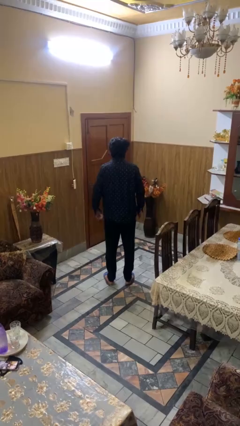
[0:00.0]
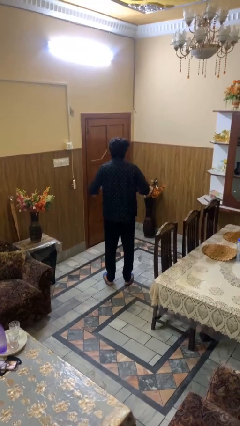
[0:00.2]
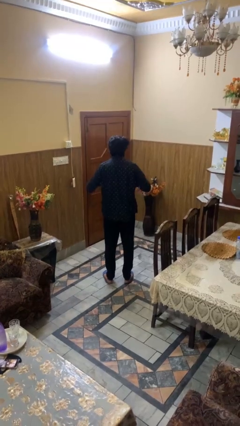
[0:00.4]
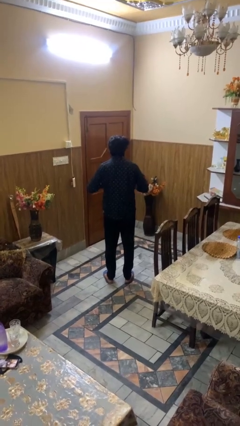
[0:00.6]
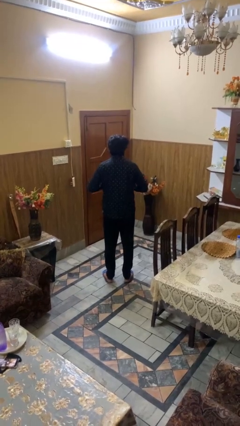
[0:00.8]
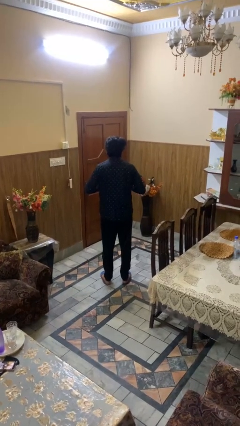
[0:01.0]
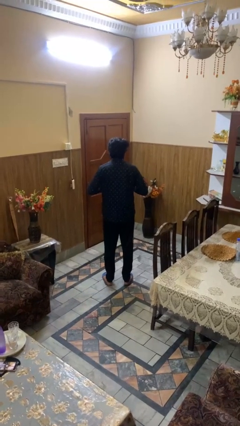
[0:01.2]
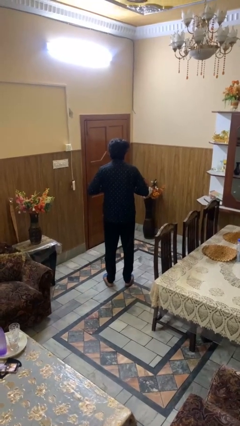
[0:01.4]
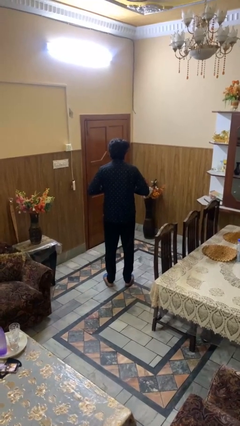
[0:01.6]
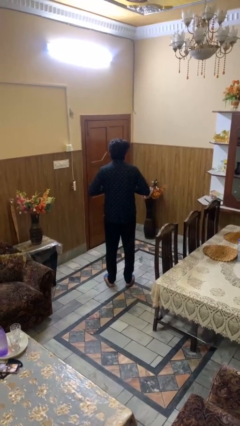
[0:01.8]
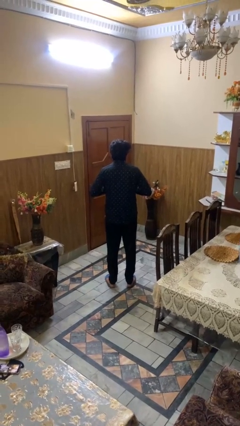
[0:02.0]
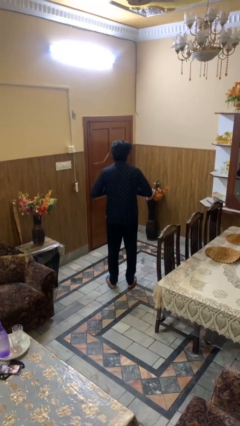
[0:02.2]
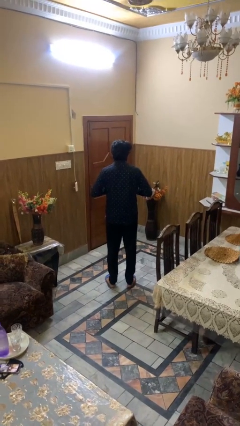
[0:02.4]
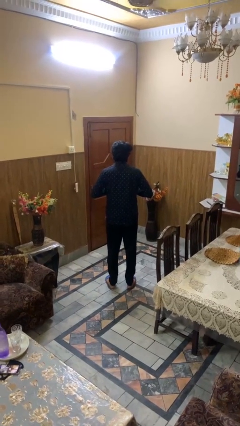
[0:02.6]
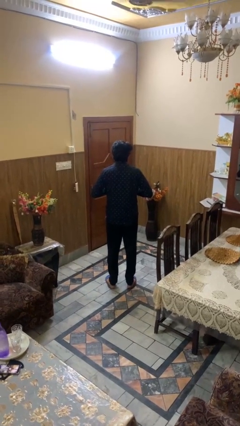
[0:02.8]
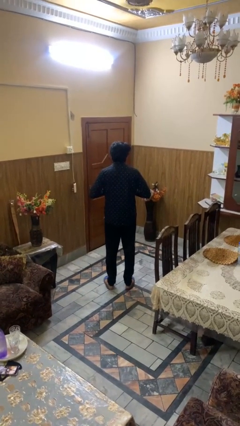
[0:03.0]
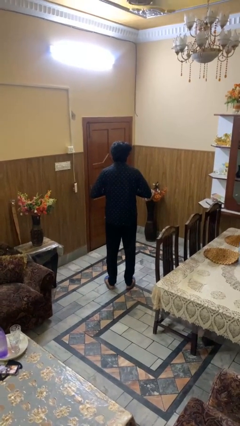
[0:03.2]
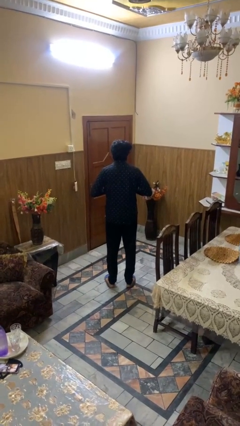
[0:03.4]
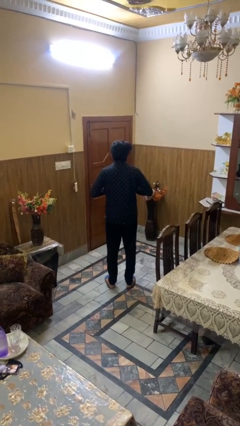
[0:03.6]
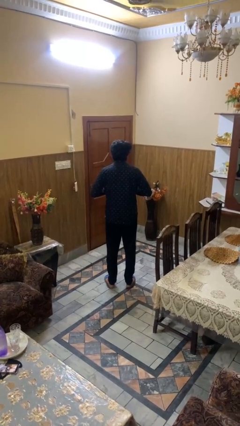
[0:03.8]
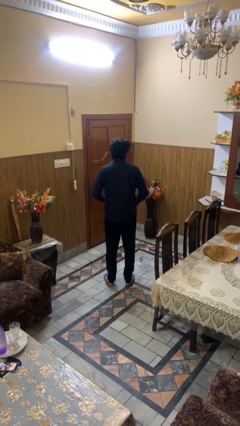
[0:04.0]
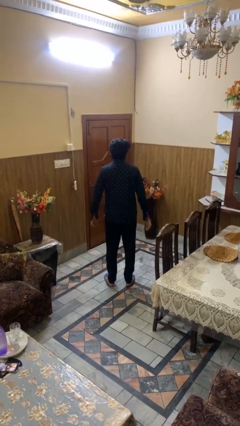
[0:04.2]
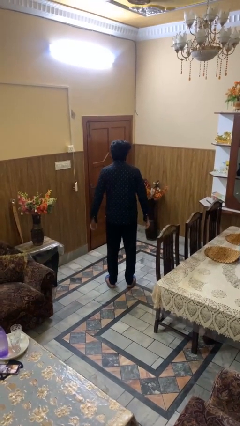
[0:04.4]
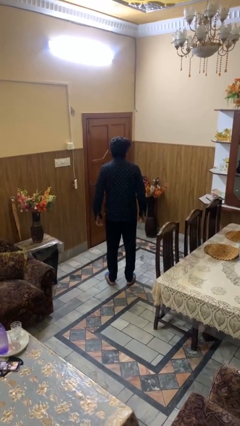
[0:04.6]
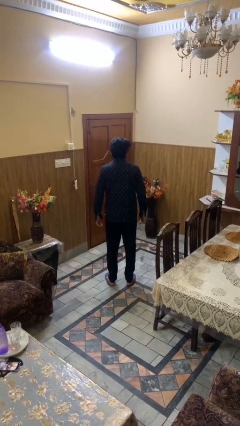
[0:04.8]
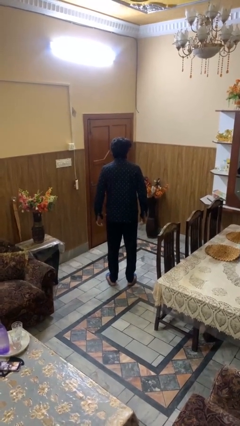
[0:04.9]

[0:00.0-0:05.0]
person buttons shirt

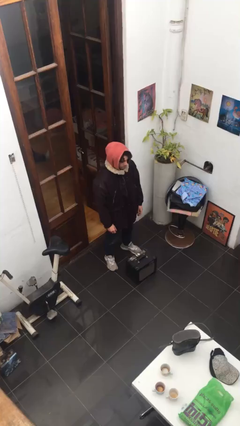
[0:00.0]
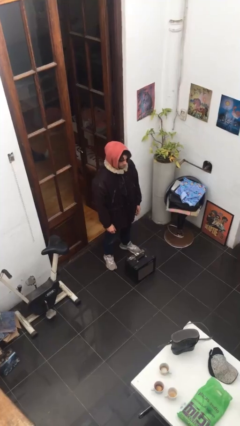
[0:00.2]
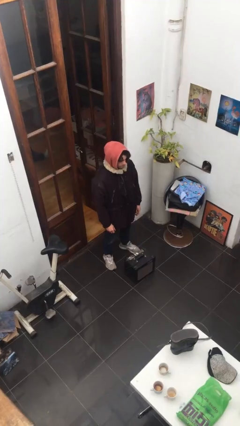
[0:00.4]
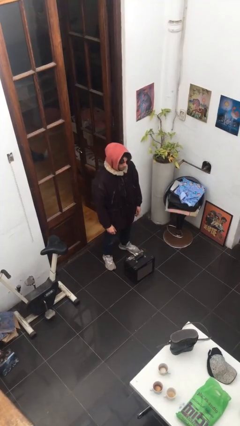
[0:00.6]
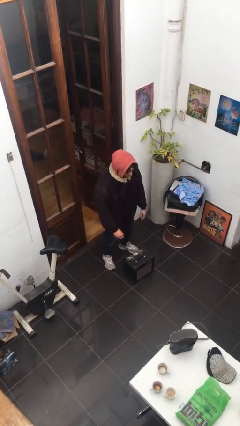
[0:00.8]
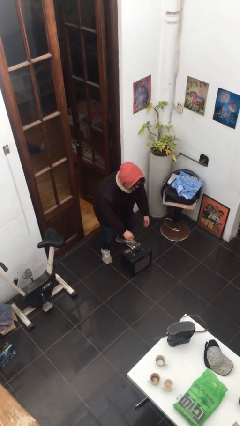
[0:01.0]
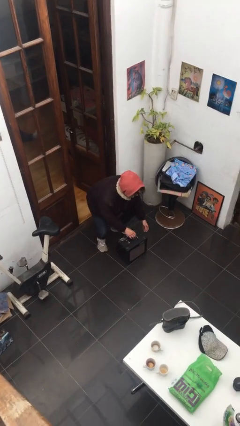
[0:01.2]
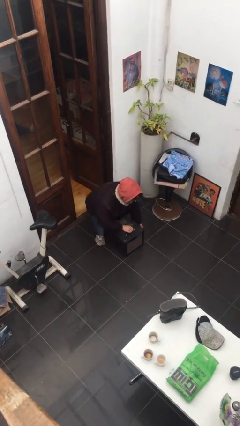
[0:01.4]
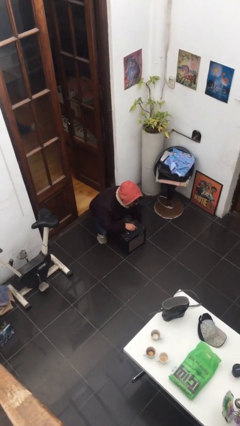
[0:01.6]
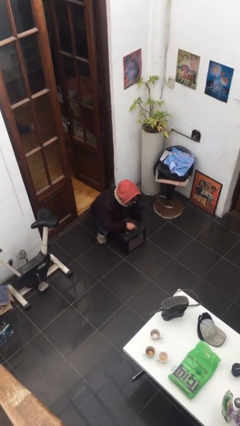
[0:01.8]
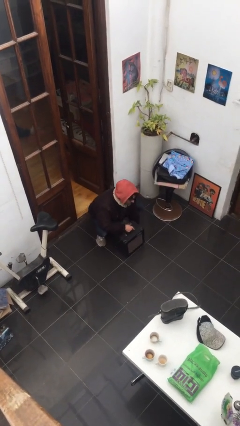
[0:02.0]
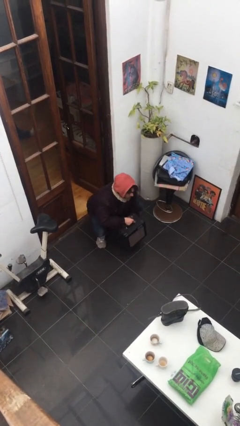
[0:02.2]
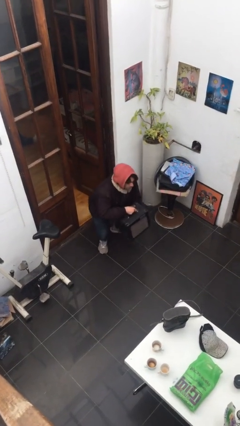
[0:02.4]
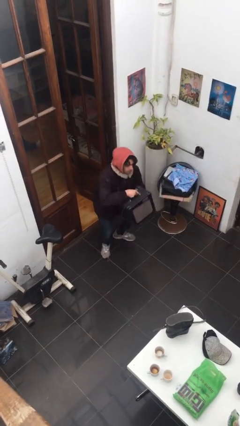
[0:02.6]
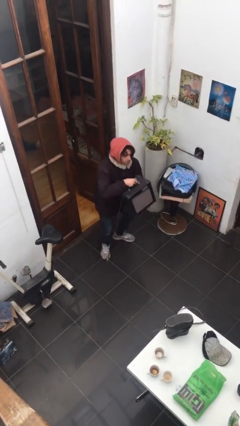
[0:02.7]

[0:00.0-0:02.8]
person picks up object from floor

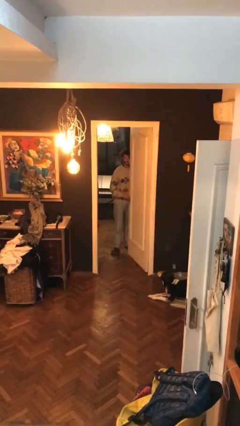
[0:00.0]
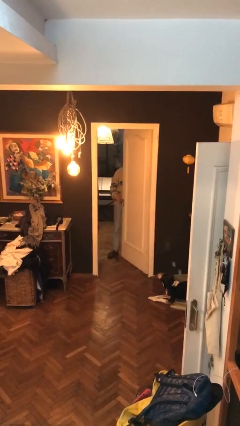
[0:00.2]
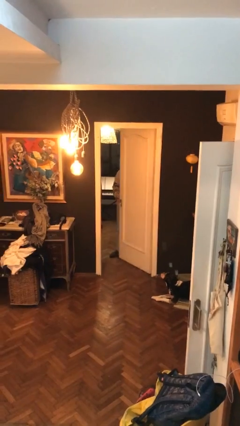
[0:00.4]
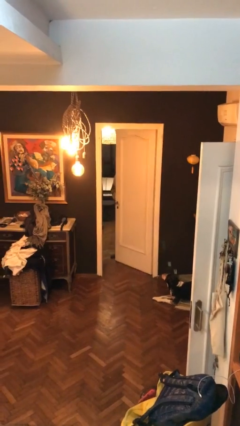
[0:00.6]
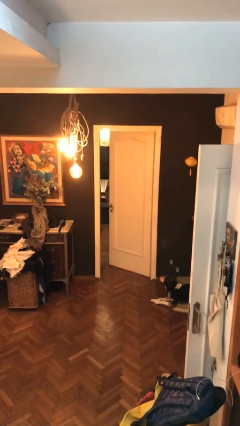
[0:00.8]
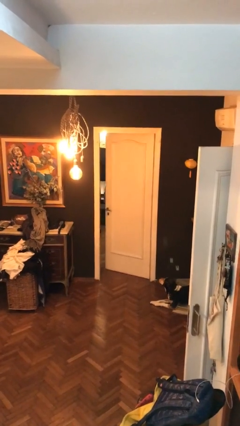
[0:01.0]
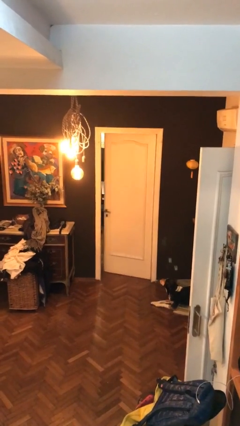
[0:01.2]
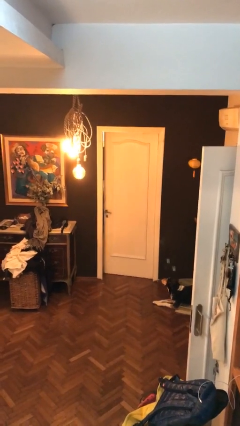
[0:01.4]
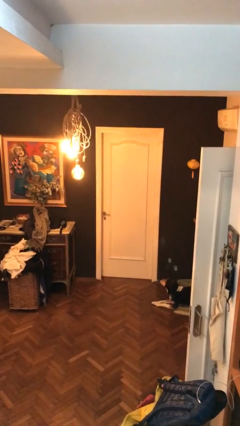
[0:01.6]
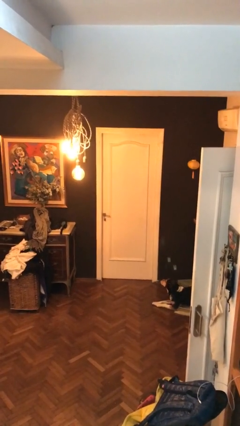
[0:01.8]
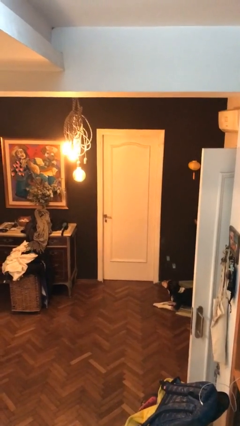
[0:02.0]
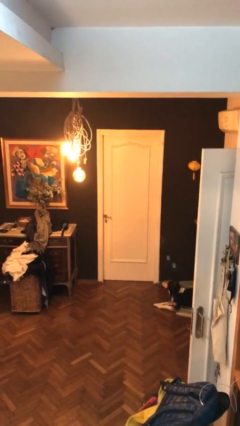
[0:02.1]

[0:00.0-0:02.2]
person closes facility door

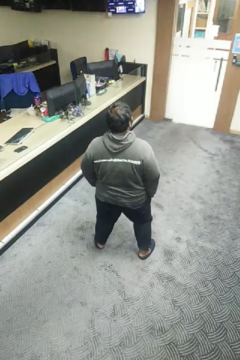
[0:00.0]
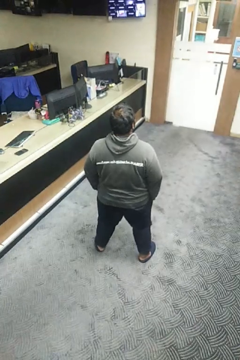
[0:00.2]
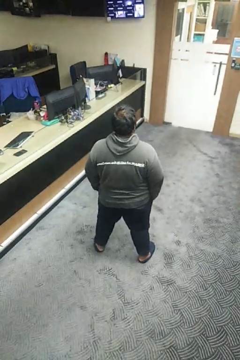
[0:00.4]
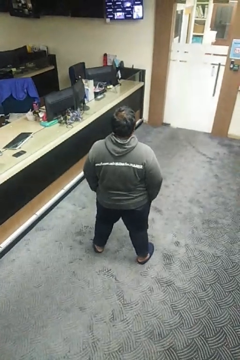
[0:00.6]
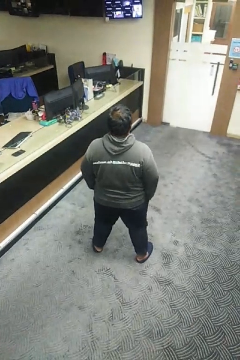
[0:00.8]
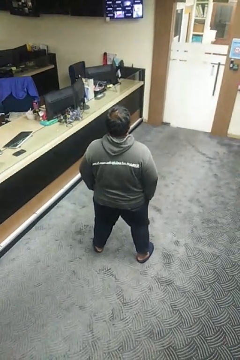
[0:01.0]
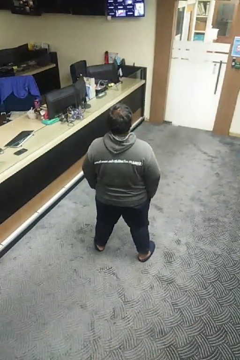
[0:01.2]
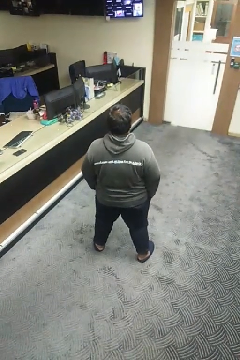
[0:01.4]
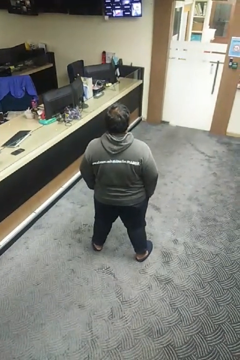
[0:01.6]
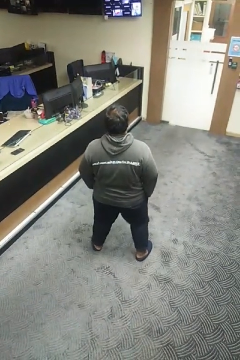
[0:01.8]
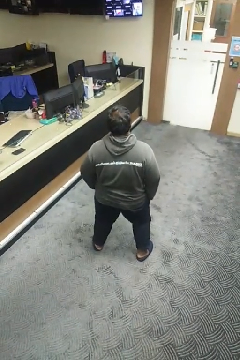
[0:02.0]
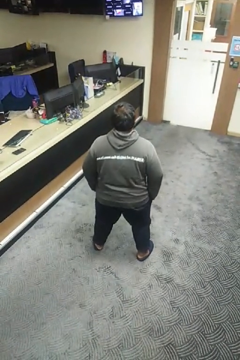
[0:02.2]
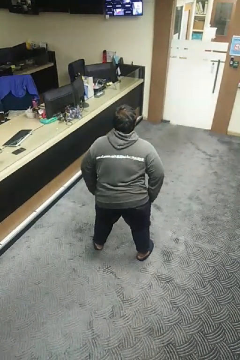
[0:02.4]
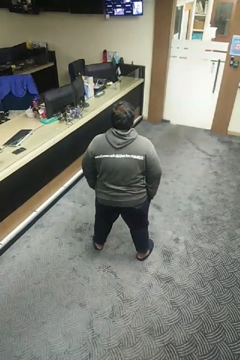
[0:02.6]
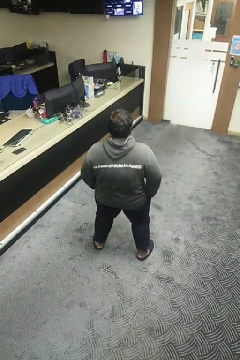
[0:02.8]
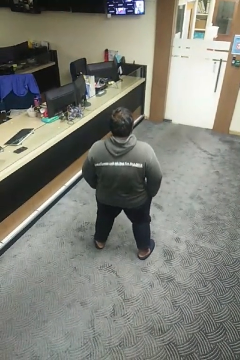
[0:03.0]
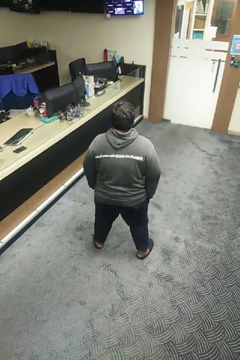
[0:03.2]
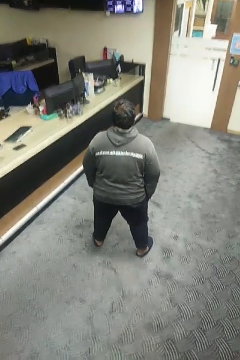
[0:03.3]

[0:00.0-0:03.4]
person wiggles hips

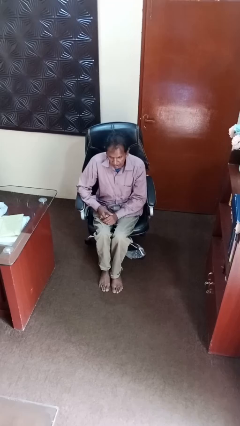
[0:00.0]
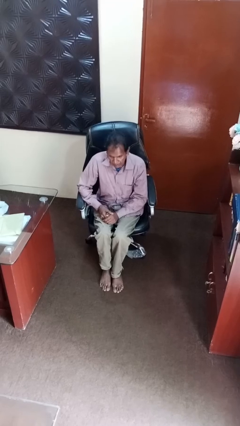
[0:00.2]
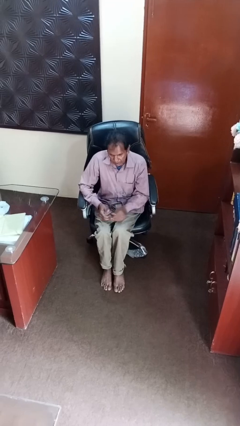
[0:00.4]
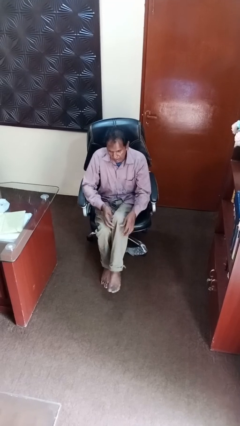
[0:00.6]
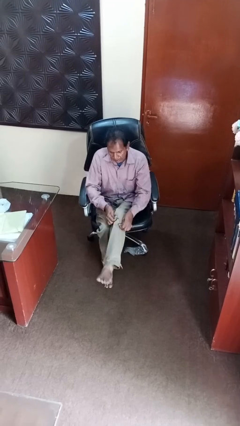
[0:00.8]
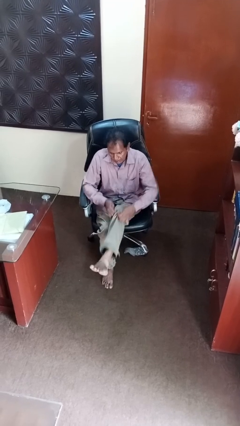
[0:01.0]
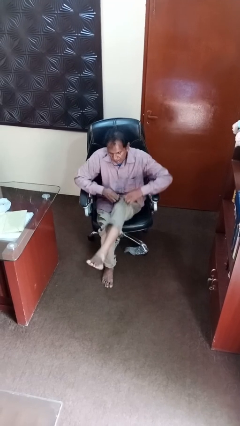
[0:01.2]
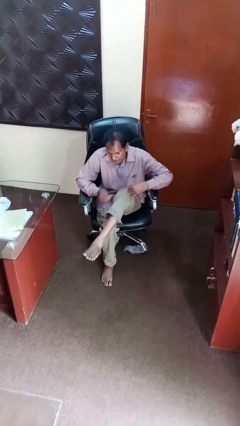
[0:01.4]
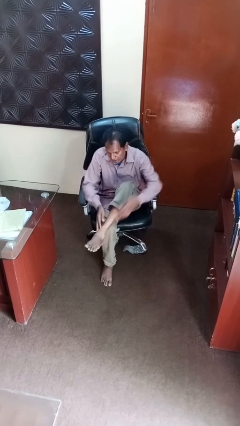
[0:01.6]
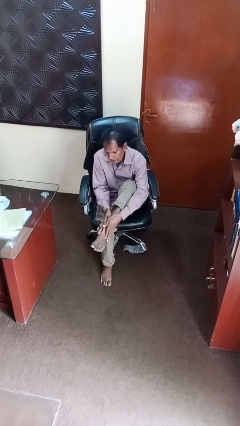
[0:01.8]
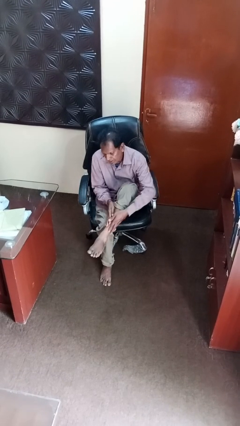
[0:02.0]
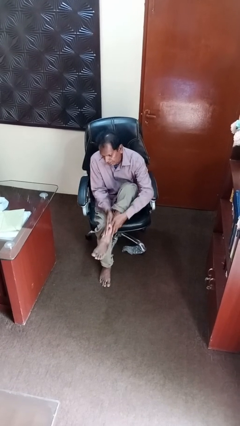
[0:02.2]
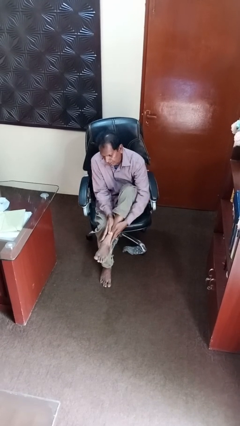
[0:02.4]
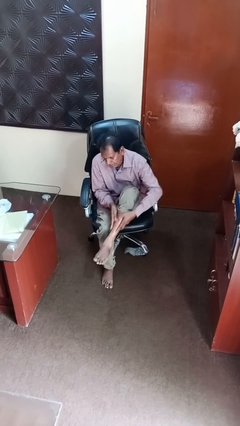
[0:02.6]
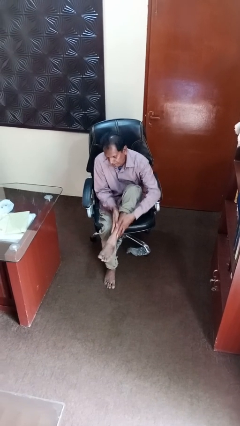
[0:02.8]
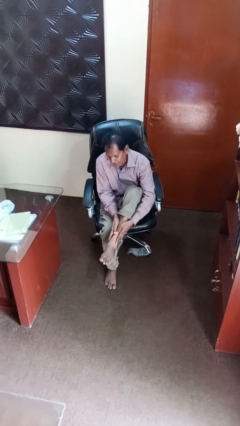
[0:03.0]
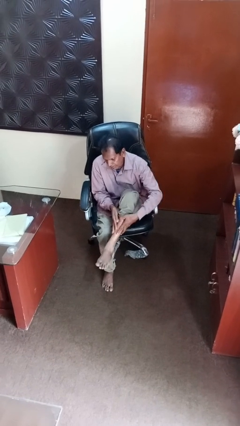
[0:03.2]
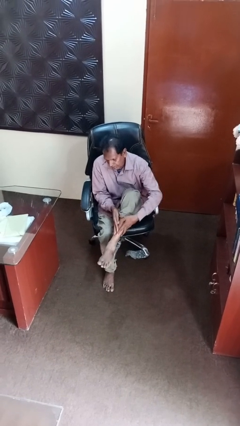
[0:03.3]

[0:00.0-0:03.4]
person rubs foot

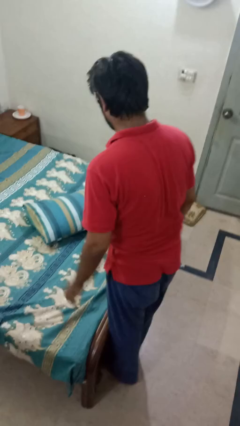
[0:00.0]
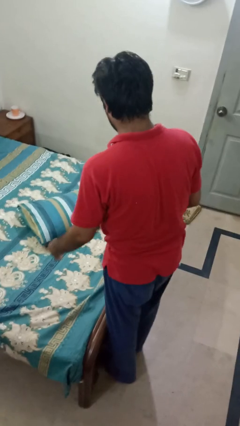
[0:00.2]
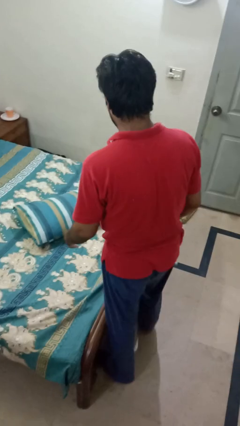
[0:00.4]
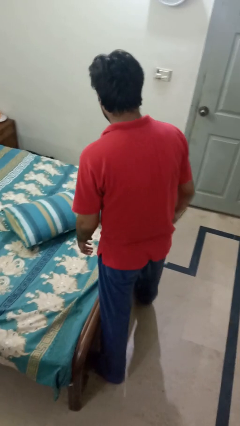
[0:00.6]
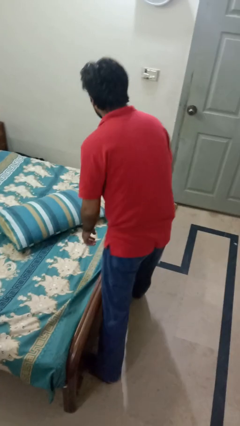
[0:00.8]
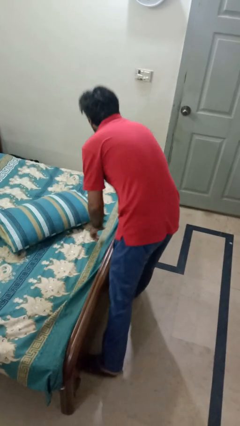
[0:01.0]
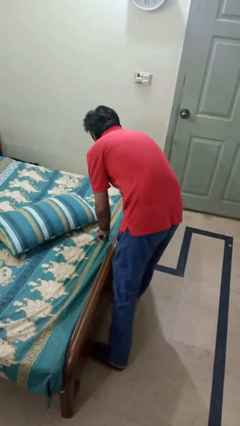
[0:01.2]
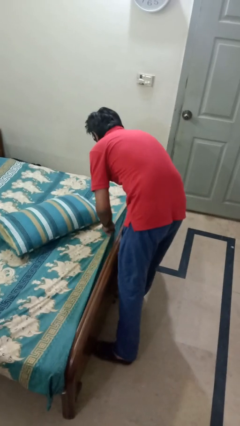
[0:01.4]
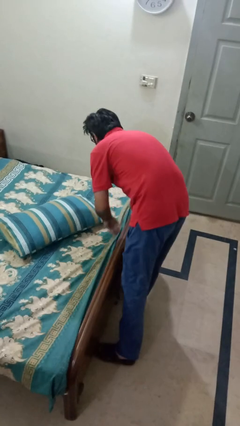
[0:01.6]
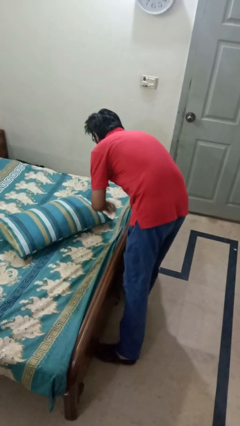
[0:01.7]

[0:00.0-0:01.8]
person makes bed
